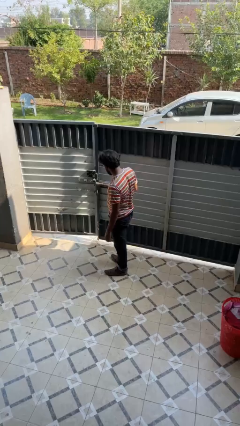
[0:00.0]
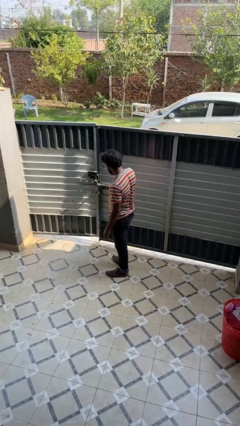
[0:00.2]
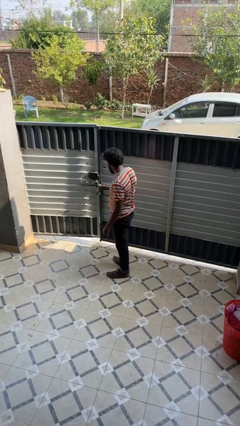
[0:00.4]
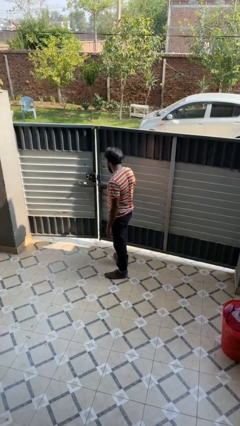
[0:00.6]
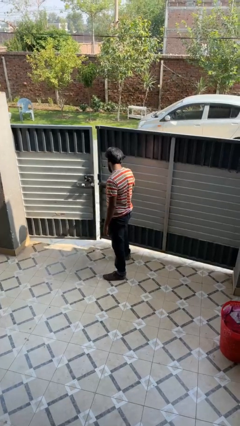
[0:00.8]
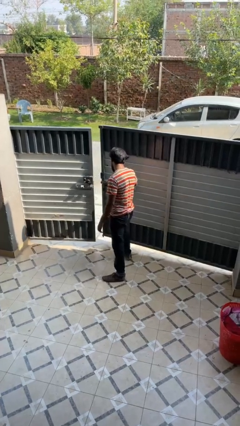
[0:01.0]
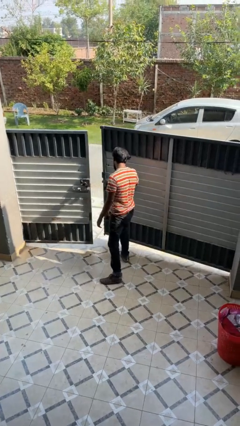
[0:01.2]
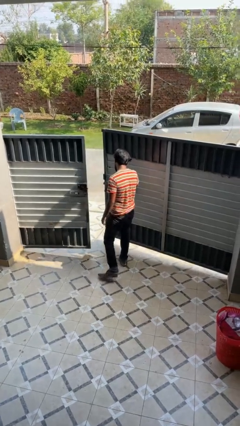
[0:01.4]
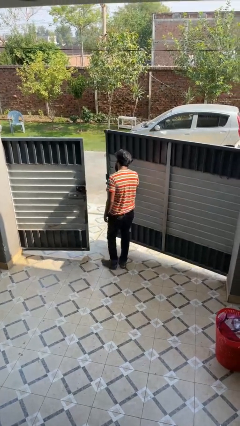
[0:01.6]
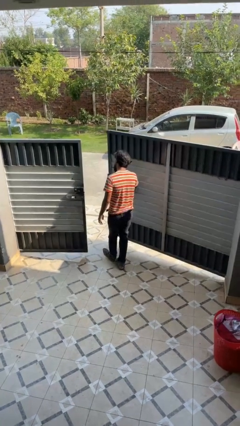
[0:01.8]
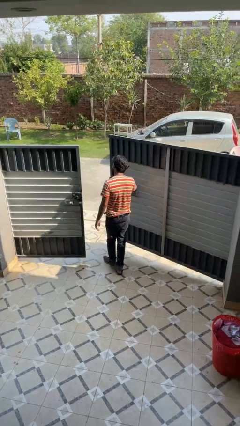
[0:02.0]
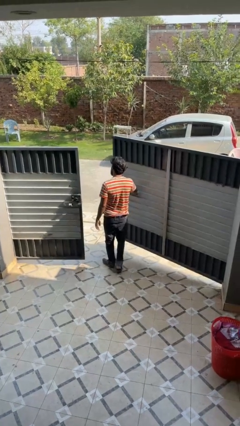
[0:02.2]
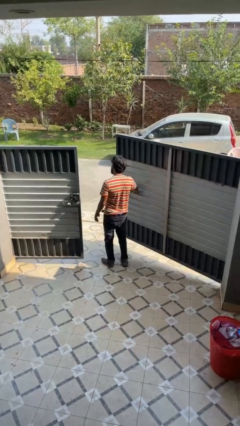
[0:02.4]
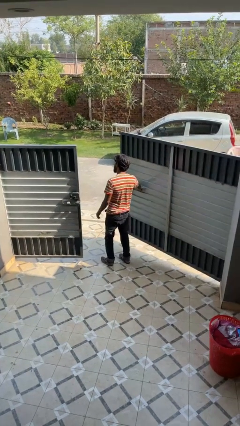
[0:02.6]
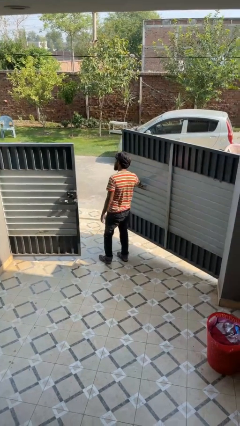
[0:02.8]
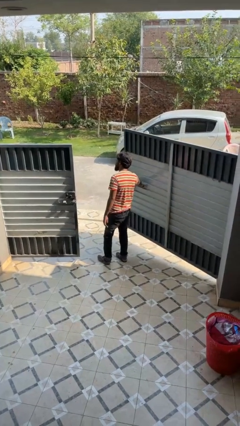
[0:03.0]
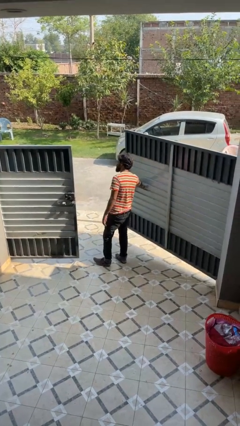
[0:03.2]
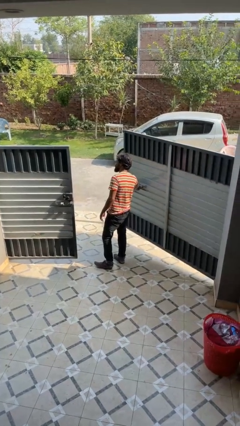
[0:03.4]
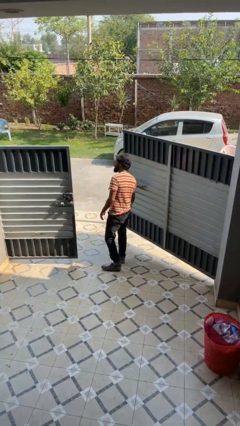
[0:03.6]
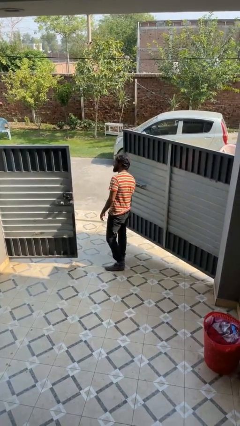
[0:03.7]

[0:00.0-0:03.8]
person opens gate

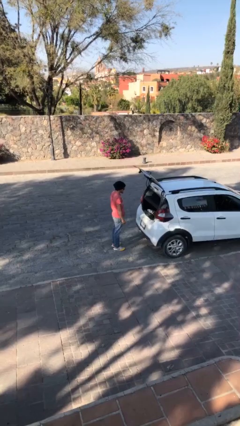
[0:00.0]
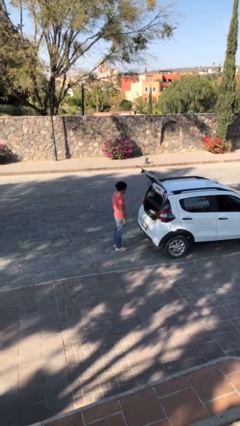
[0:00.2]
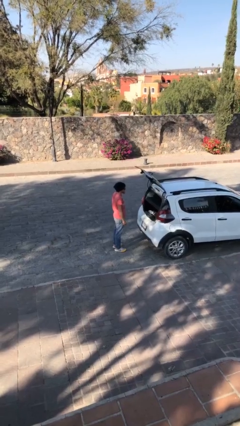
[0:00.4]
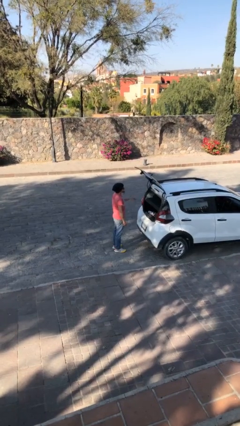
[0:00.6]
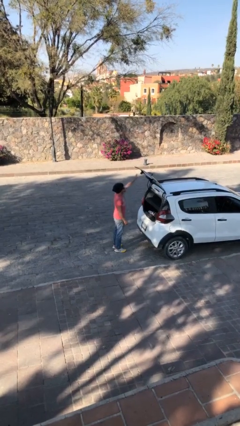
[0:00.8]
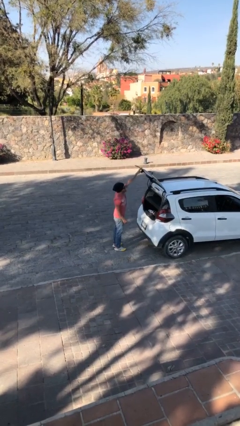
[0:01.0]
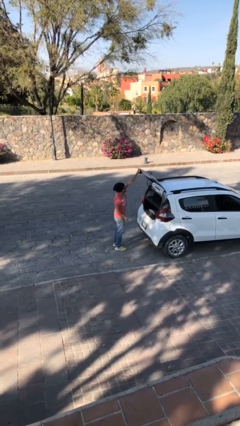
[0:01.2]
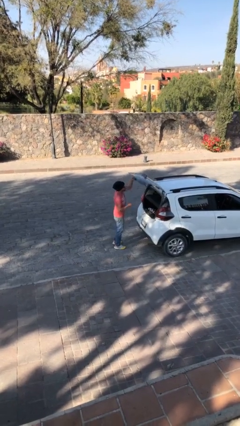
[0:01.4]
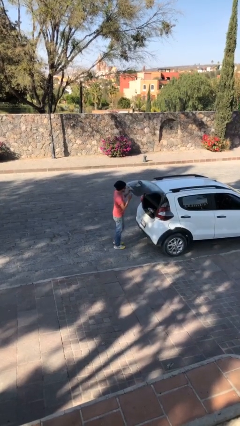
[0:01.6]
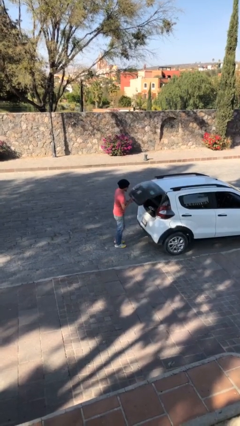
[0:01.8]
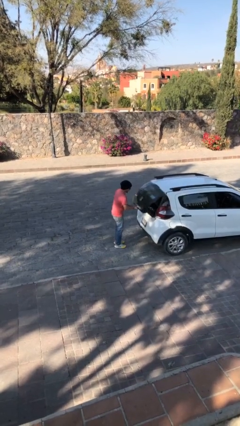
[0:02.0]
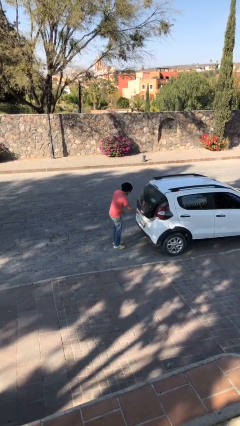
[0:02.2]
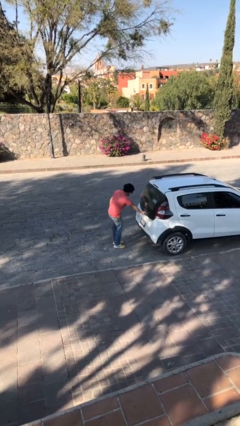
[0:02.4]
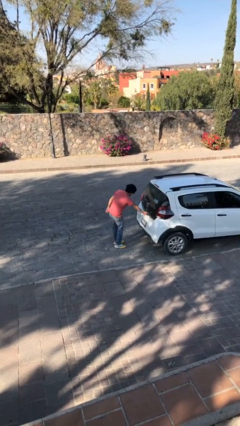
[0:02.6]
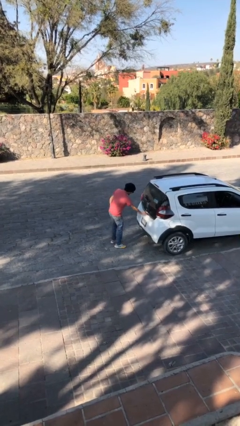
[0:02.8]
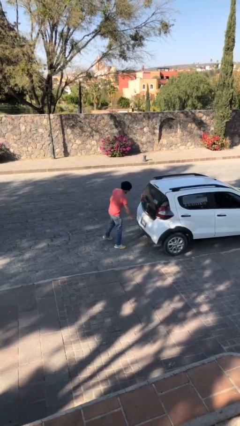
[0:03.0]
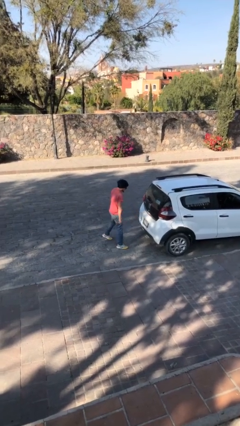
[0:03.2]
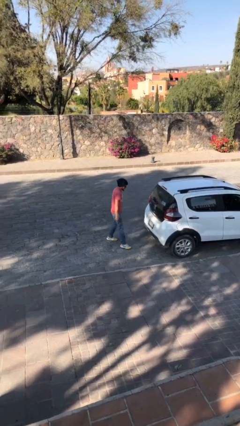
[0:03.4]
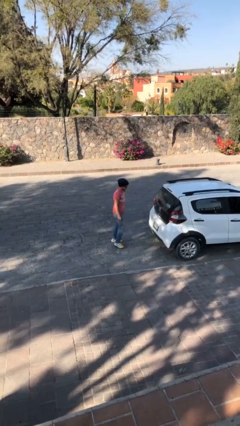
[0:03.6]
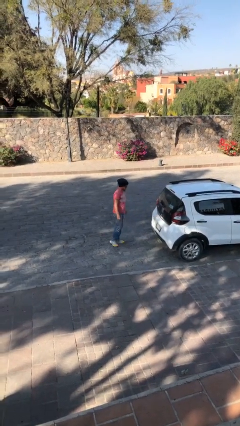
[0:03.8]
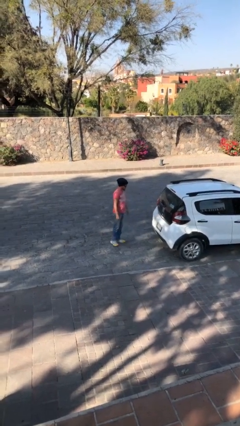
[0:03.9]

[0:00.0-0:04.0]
person closes car trunk

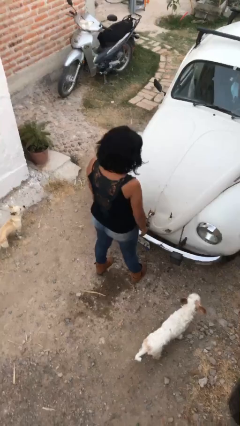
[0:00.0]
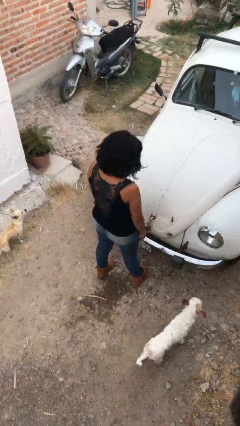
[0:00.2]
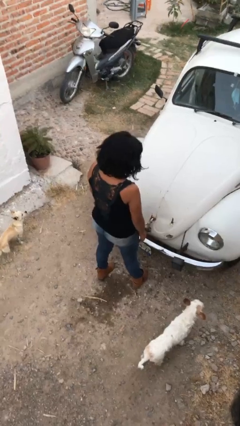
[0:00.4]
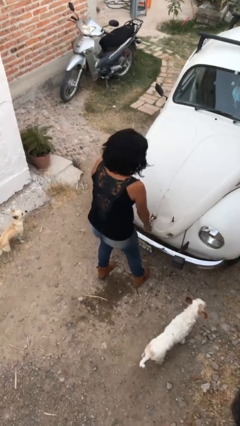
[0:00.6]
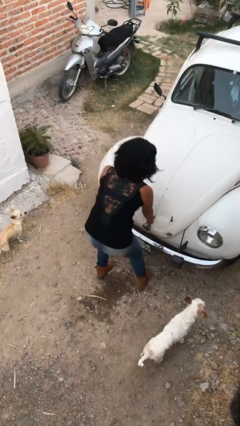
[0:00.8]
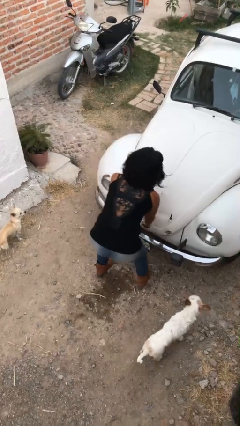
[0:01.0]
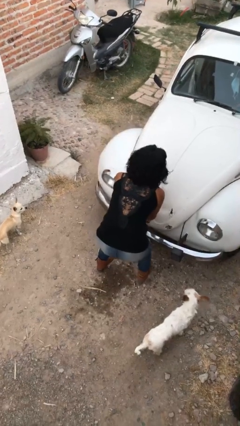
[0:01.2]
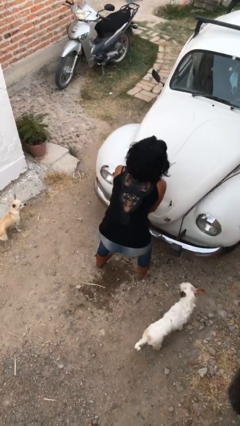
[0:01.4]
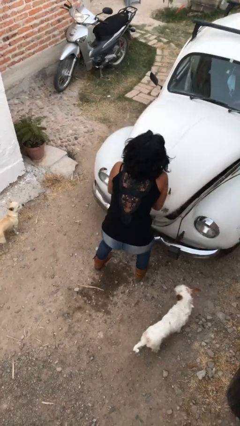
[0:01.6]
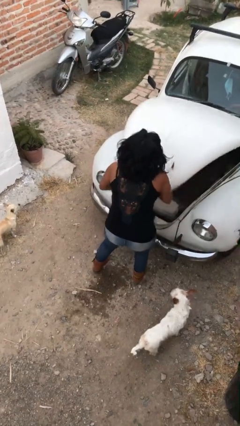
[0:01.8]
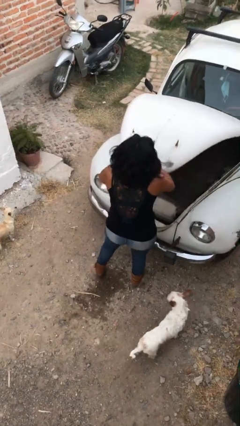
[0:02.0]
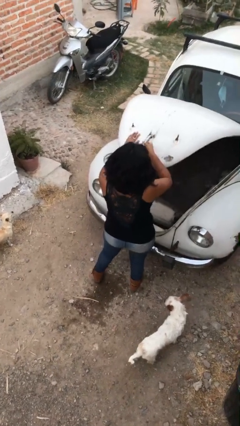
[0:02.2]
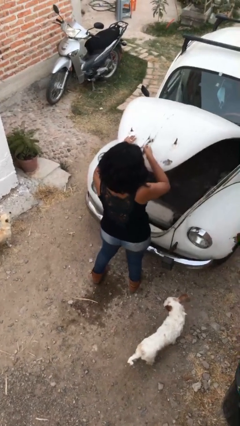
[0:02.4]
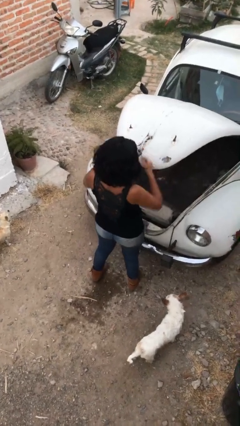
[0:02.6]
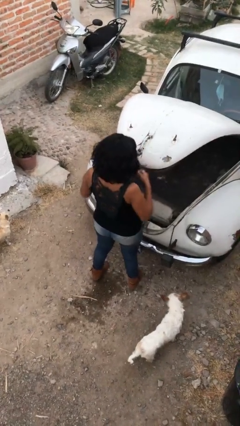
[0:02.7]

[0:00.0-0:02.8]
person opens car trunk

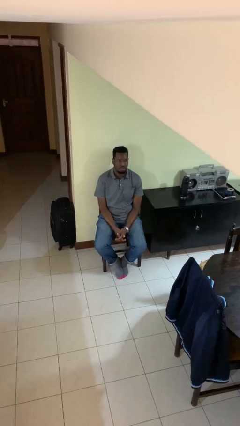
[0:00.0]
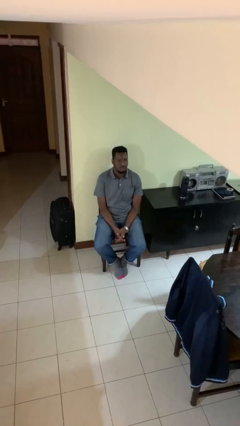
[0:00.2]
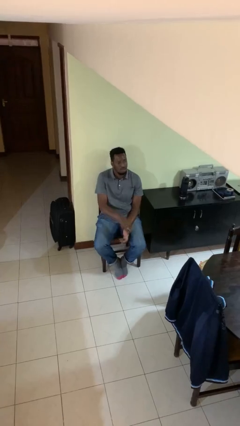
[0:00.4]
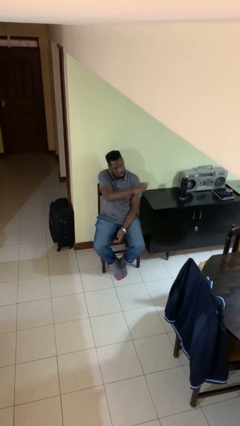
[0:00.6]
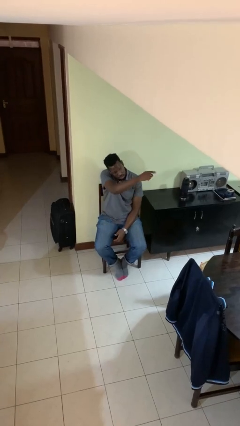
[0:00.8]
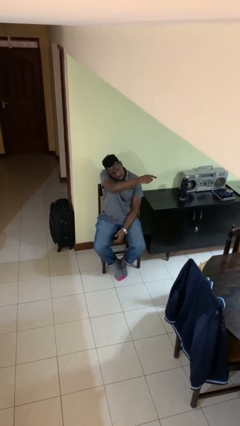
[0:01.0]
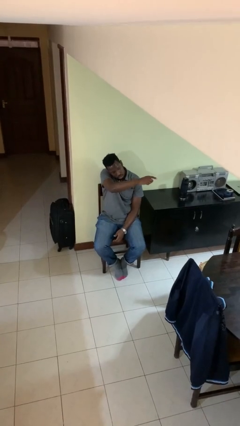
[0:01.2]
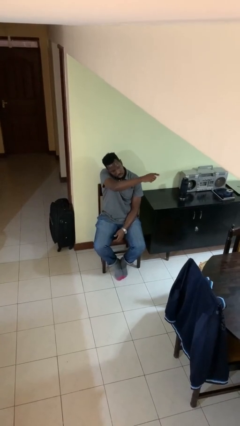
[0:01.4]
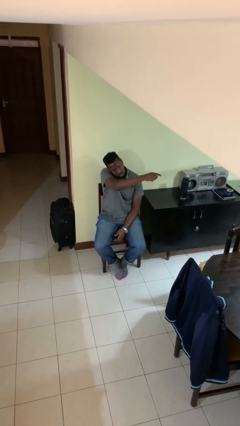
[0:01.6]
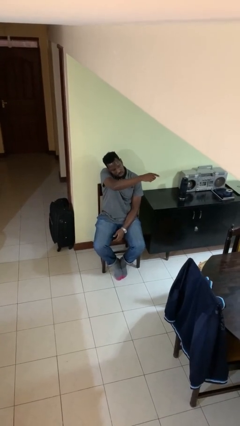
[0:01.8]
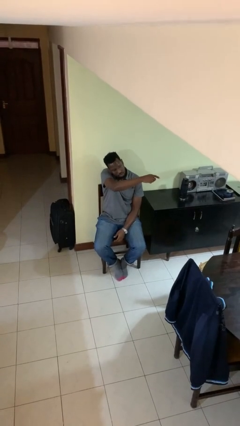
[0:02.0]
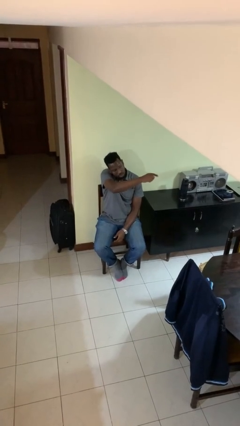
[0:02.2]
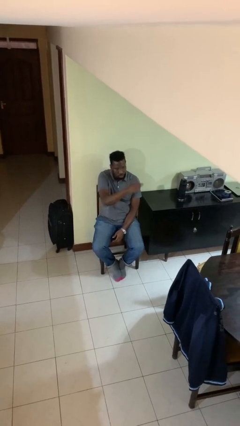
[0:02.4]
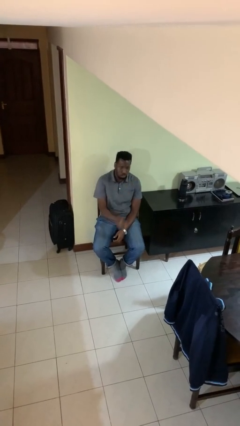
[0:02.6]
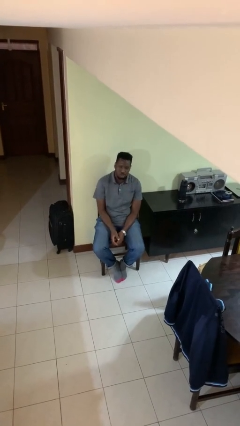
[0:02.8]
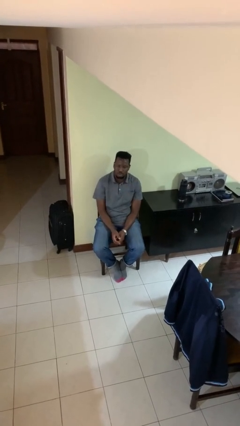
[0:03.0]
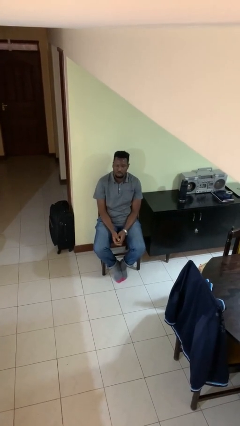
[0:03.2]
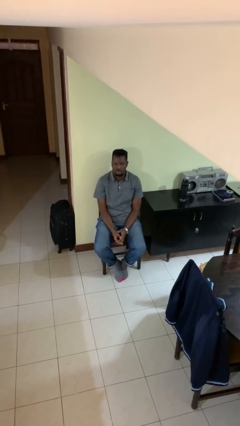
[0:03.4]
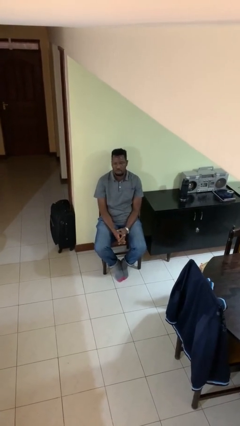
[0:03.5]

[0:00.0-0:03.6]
person points at person

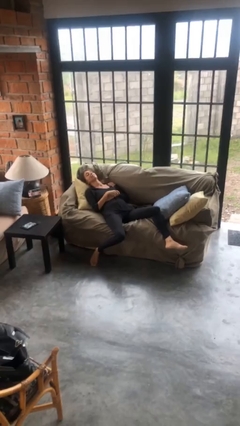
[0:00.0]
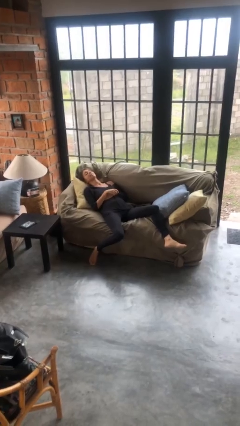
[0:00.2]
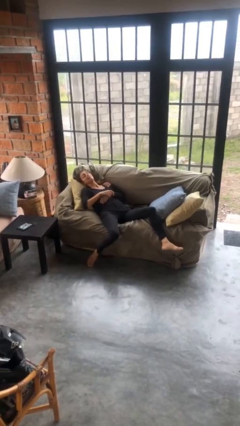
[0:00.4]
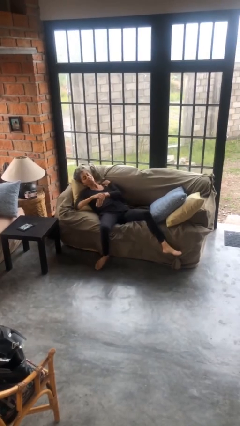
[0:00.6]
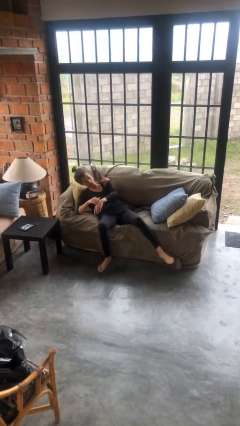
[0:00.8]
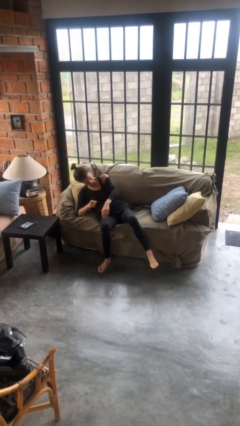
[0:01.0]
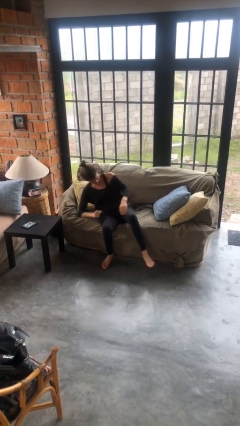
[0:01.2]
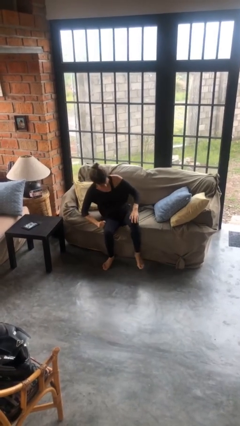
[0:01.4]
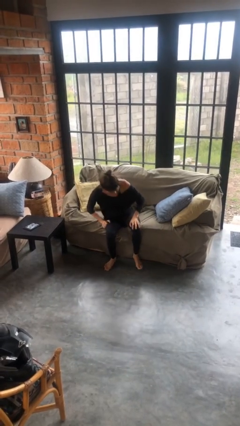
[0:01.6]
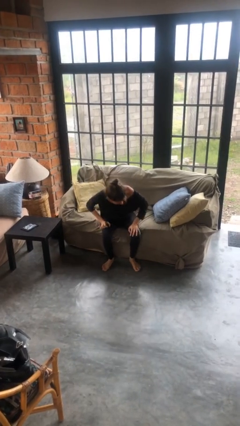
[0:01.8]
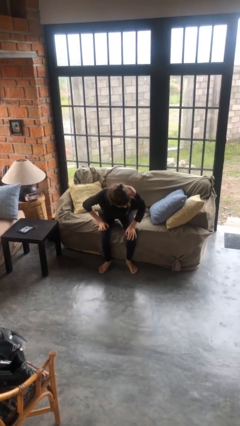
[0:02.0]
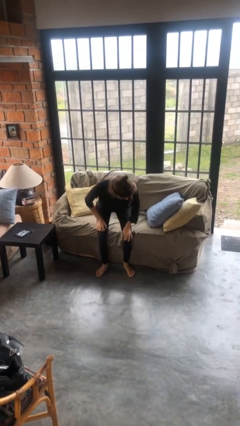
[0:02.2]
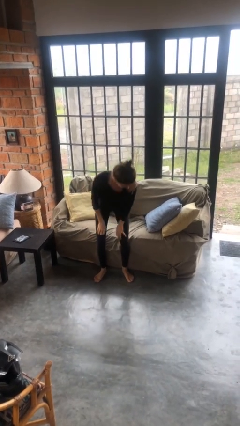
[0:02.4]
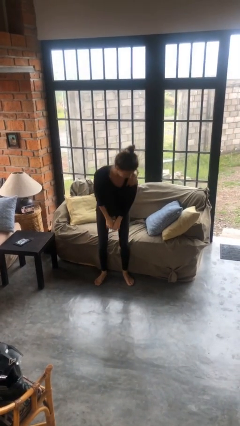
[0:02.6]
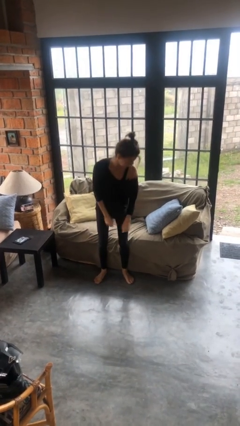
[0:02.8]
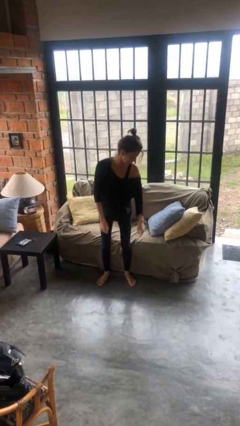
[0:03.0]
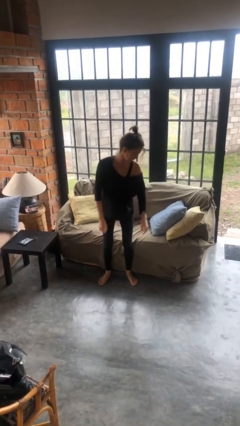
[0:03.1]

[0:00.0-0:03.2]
person stands up

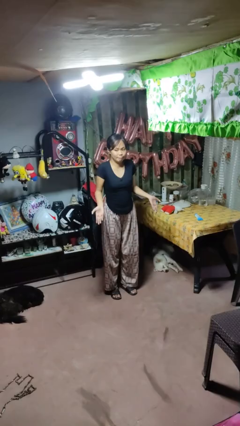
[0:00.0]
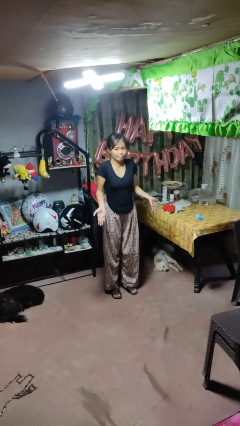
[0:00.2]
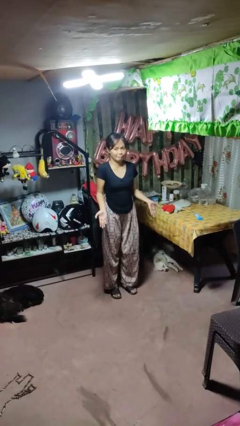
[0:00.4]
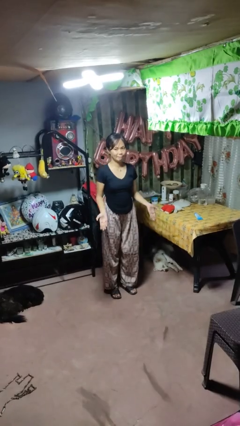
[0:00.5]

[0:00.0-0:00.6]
person shrugs
